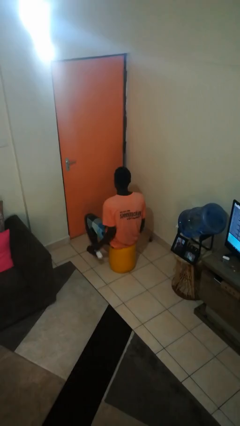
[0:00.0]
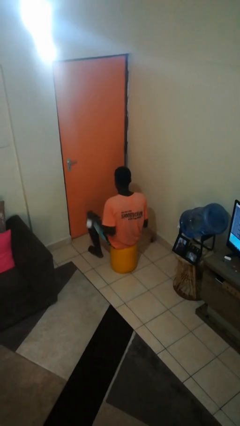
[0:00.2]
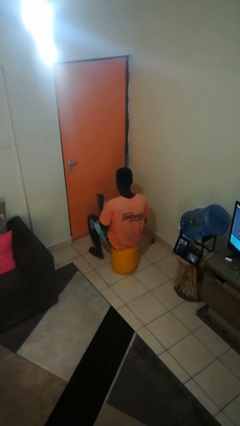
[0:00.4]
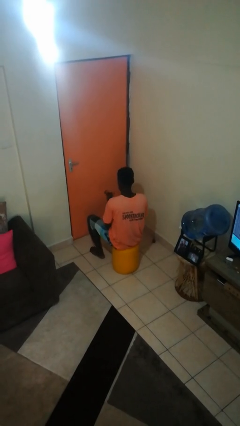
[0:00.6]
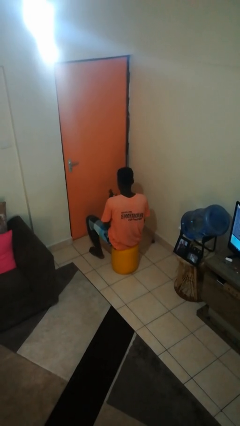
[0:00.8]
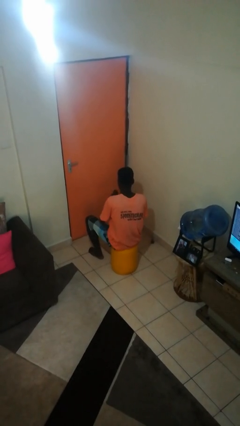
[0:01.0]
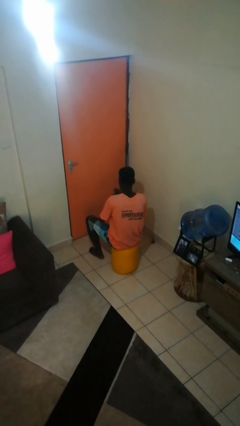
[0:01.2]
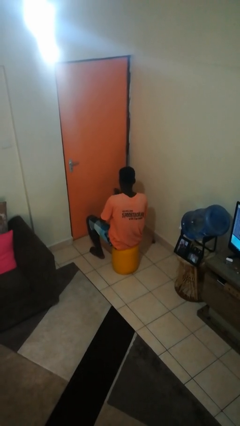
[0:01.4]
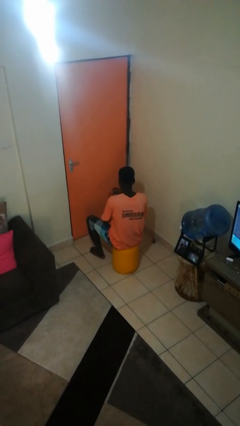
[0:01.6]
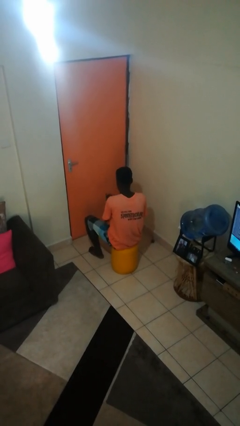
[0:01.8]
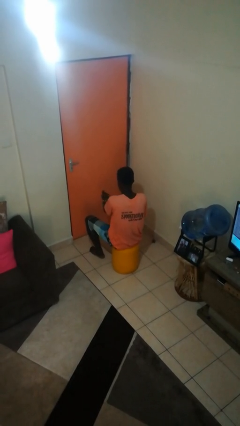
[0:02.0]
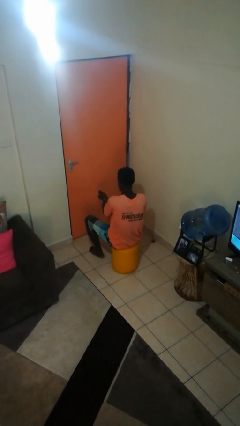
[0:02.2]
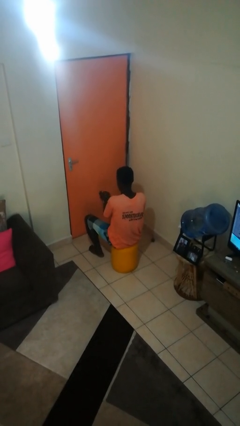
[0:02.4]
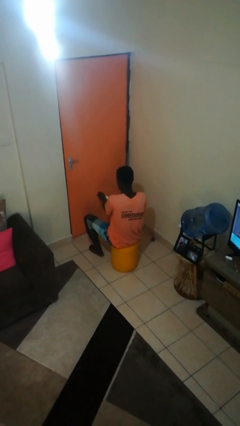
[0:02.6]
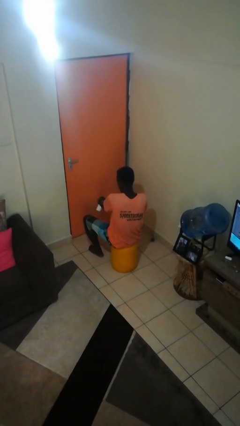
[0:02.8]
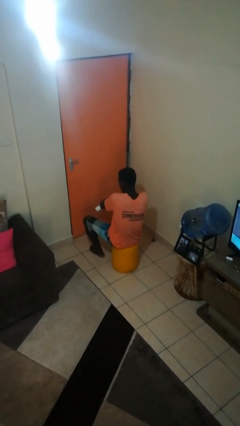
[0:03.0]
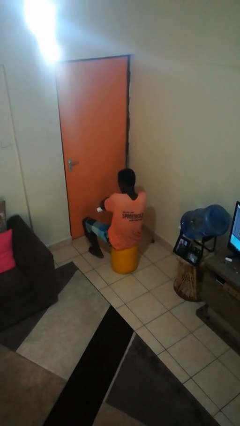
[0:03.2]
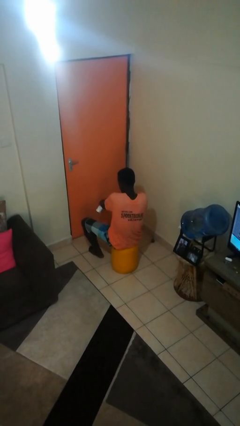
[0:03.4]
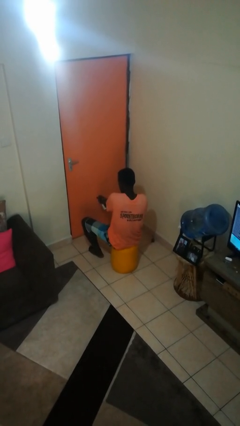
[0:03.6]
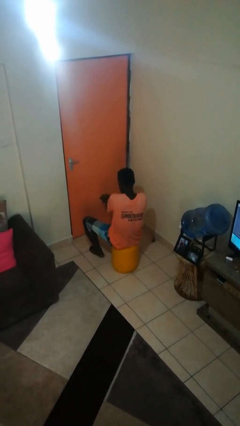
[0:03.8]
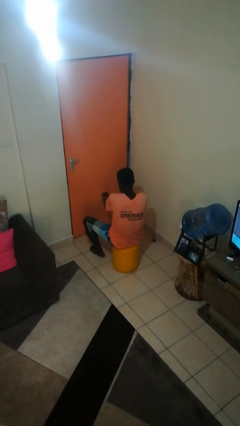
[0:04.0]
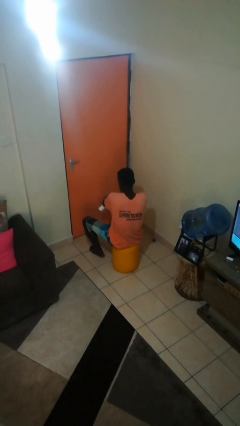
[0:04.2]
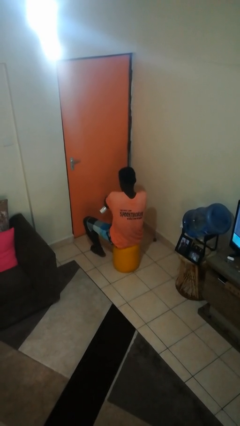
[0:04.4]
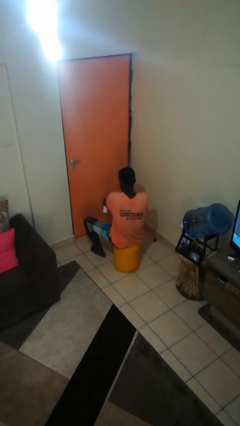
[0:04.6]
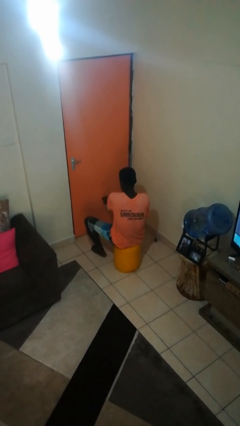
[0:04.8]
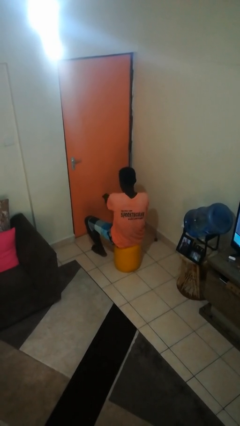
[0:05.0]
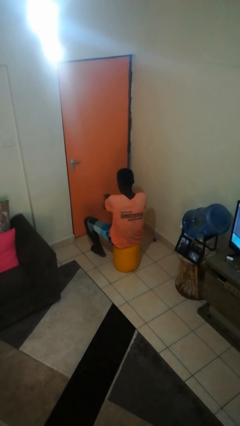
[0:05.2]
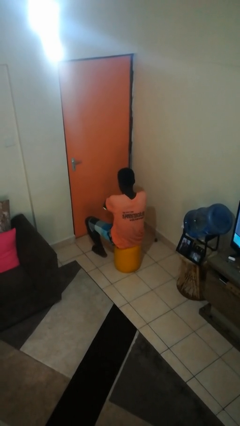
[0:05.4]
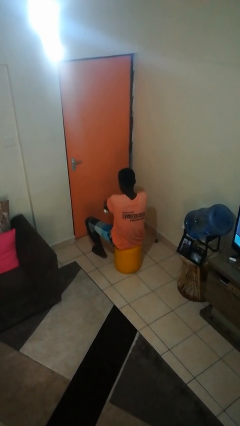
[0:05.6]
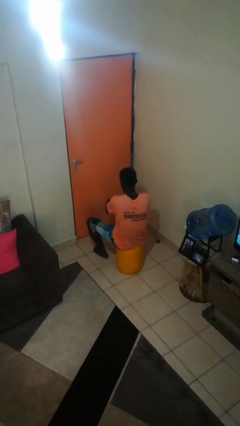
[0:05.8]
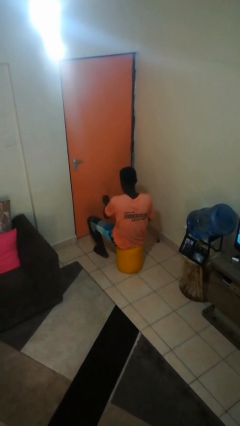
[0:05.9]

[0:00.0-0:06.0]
person applies sunscreen

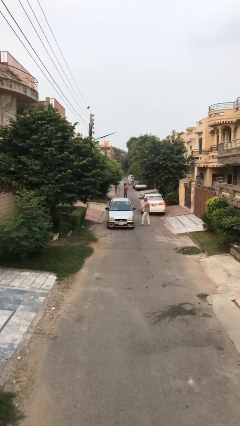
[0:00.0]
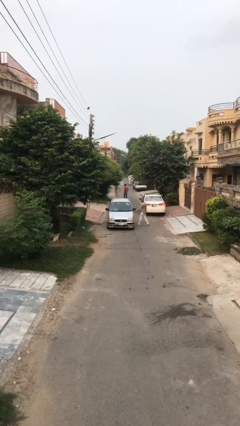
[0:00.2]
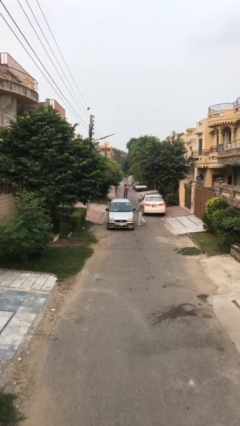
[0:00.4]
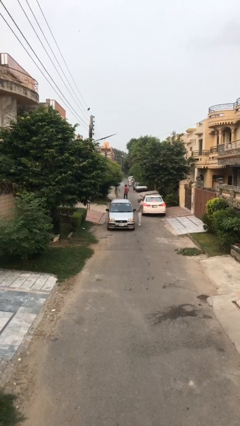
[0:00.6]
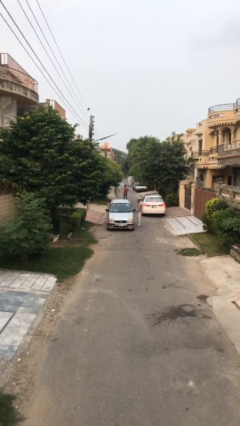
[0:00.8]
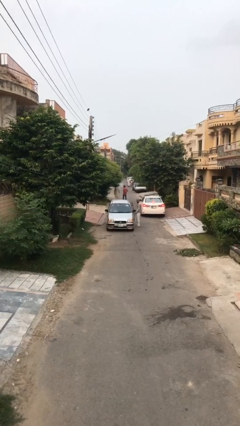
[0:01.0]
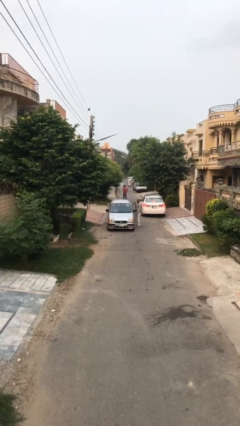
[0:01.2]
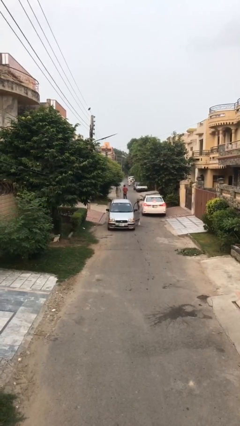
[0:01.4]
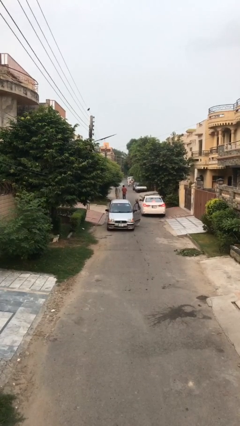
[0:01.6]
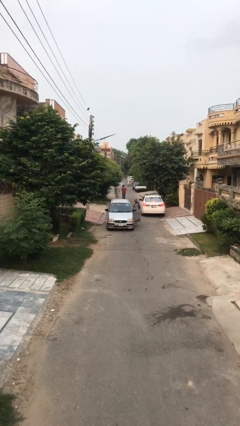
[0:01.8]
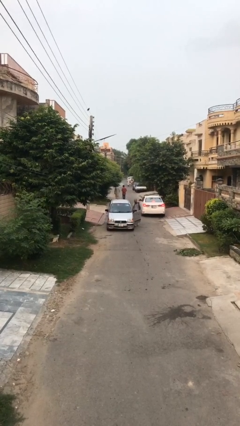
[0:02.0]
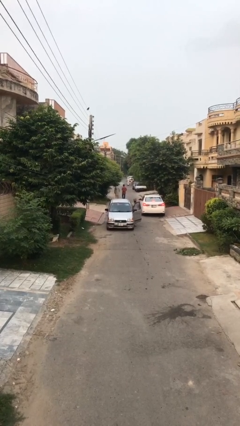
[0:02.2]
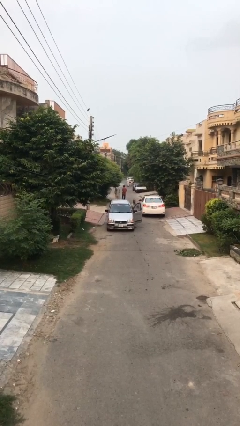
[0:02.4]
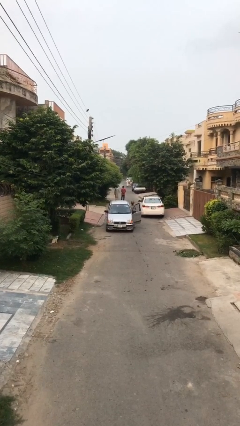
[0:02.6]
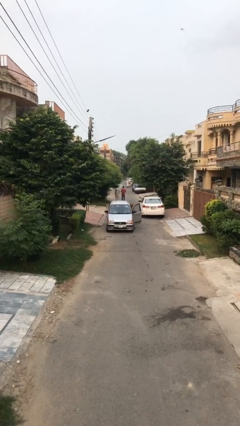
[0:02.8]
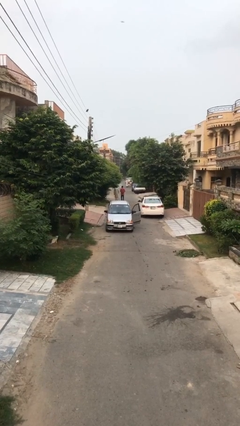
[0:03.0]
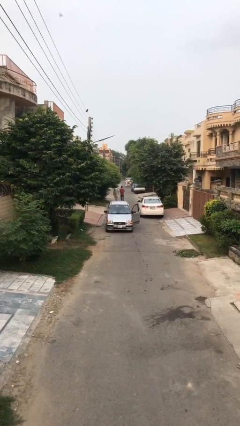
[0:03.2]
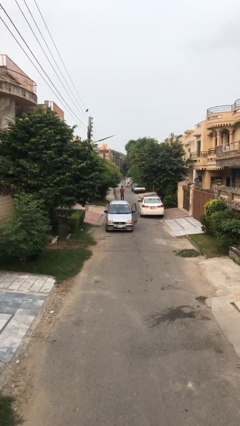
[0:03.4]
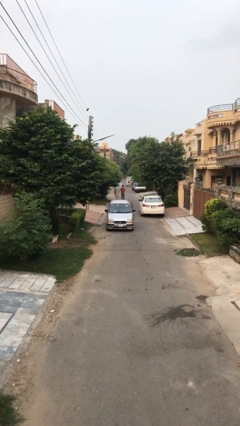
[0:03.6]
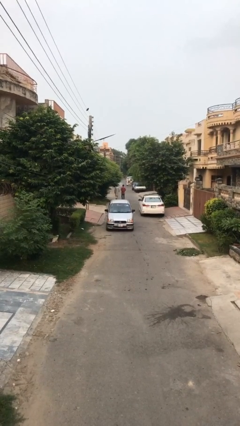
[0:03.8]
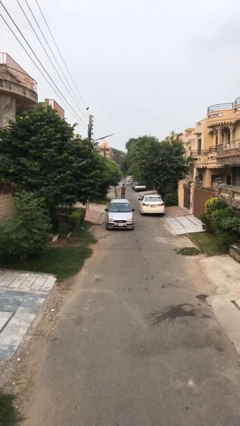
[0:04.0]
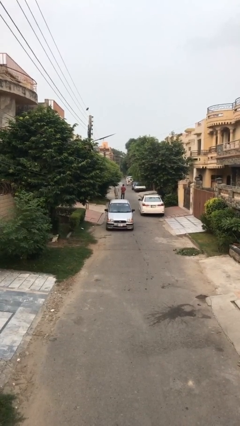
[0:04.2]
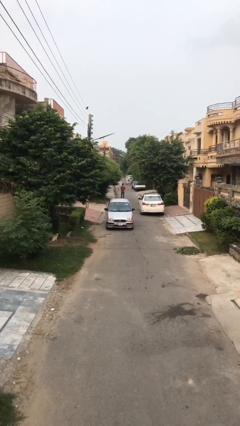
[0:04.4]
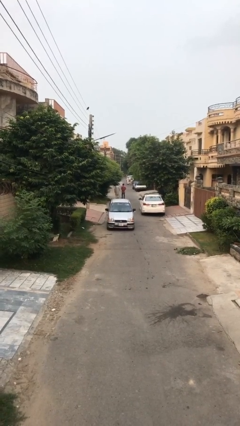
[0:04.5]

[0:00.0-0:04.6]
car picks up person

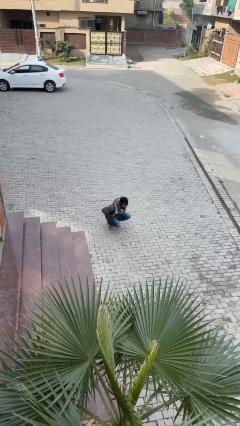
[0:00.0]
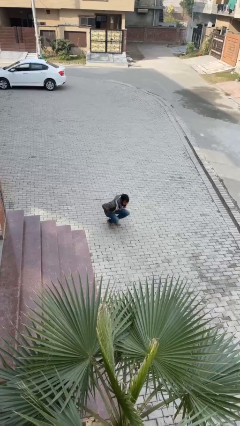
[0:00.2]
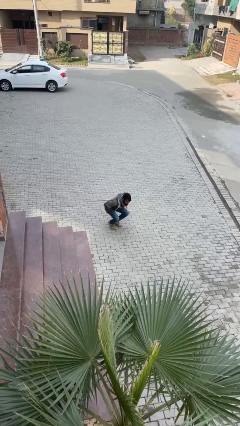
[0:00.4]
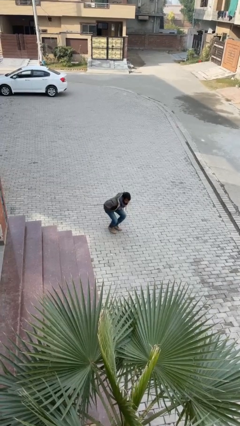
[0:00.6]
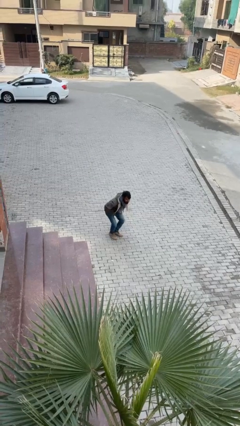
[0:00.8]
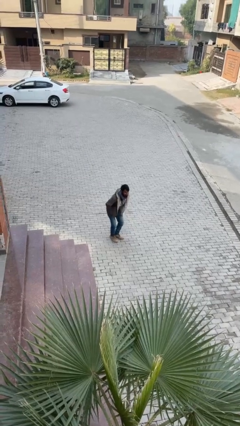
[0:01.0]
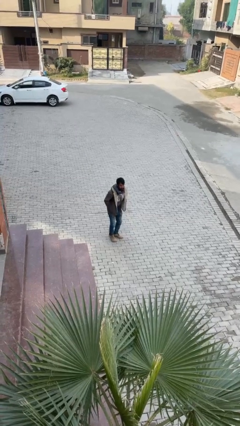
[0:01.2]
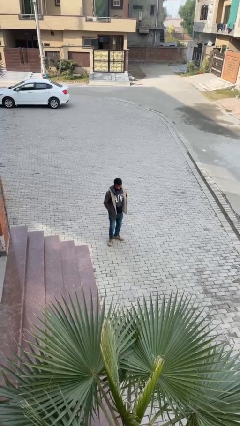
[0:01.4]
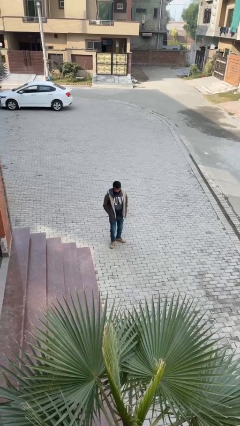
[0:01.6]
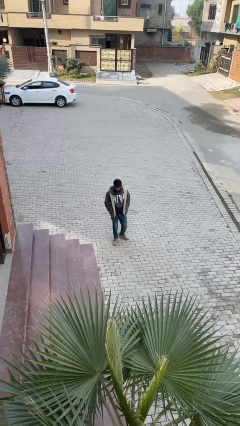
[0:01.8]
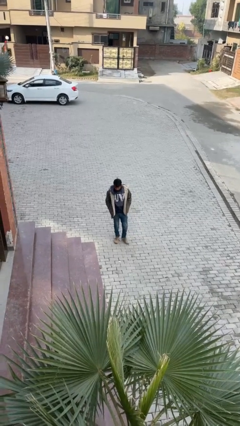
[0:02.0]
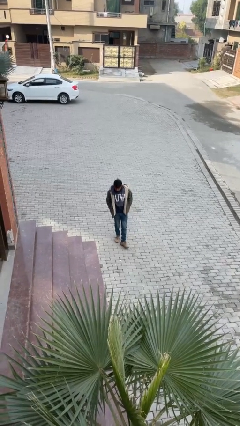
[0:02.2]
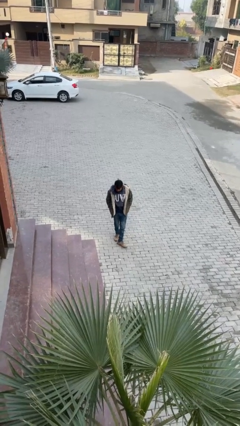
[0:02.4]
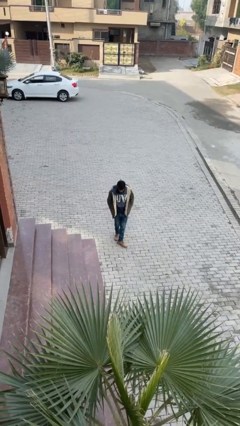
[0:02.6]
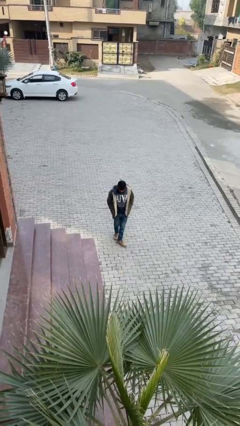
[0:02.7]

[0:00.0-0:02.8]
person stands up

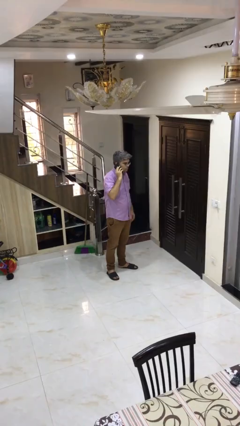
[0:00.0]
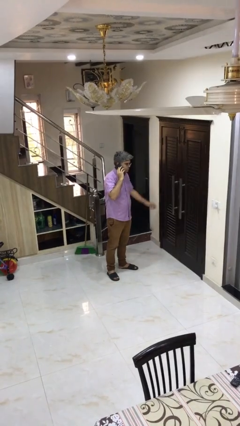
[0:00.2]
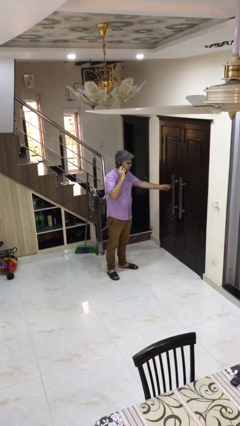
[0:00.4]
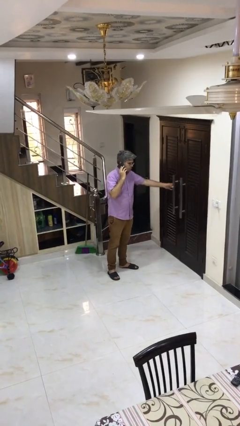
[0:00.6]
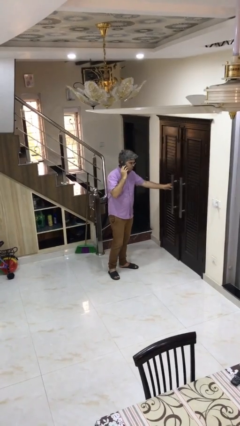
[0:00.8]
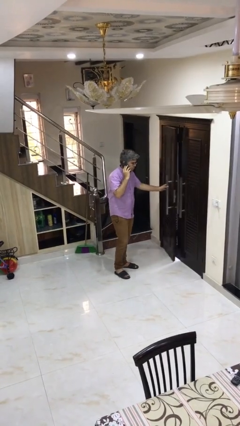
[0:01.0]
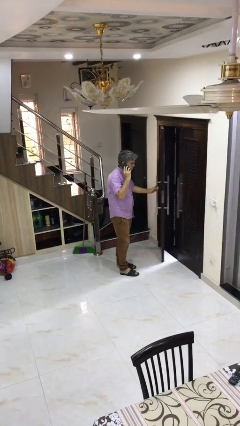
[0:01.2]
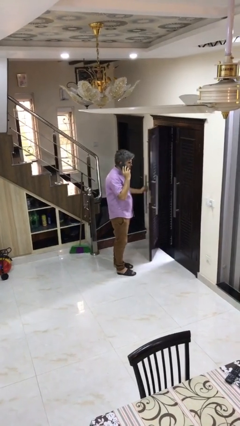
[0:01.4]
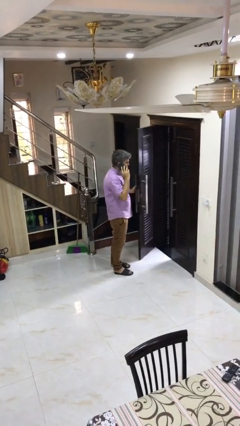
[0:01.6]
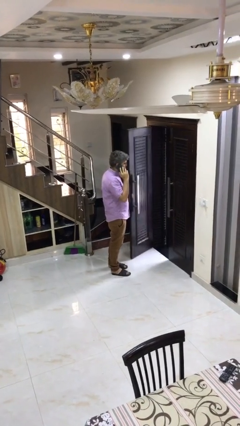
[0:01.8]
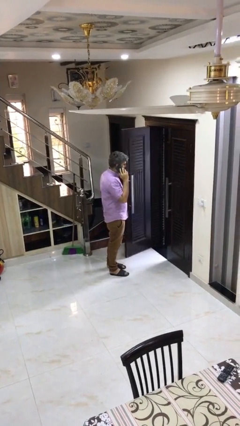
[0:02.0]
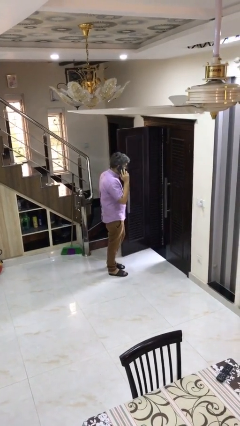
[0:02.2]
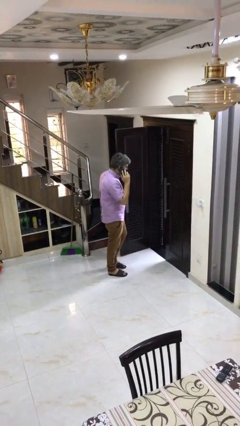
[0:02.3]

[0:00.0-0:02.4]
person opens facility door

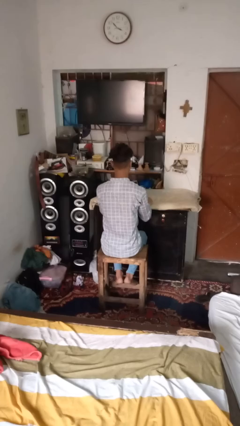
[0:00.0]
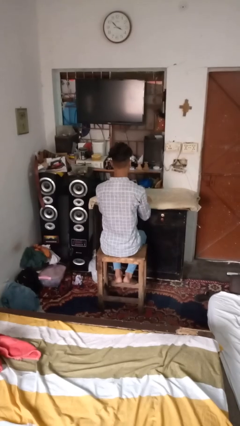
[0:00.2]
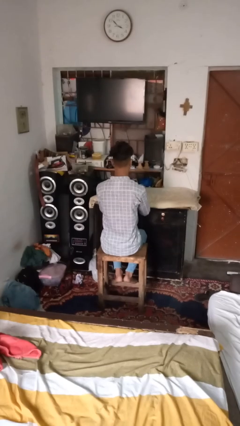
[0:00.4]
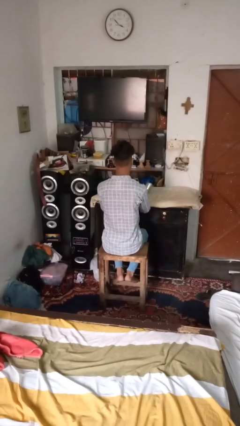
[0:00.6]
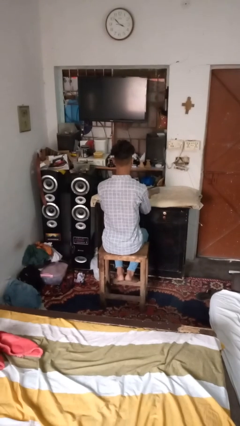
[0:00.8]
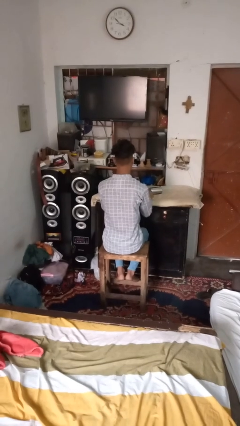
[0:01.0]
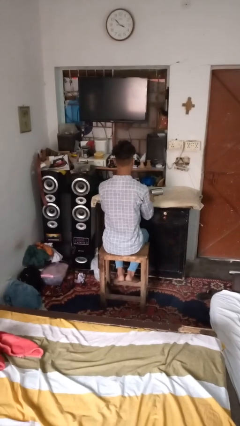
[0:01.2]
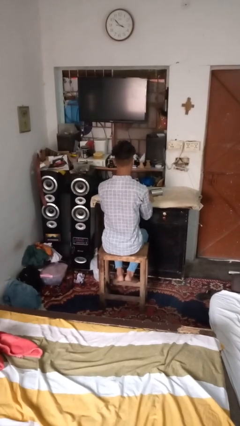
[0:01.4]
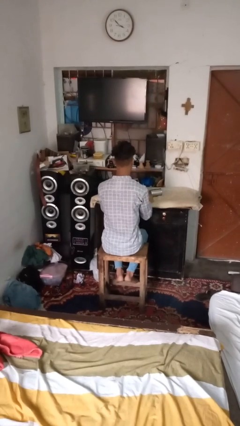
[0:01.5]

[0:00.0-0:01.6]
person knocks over glass

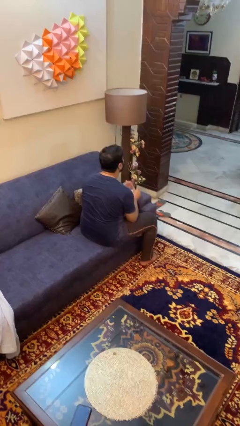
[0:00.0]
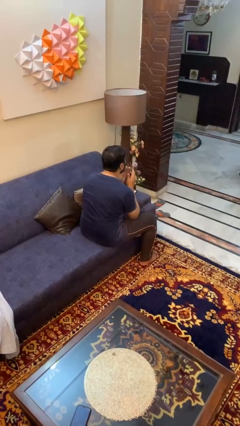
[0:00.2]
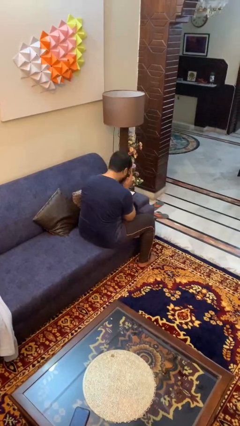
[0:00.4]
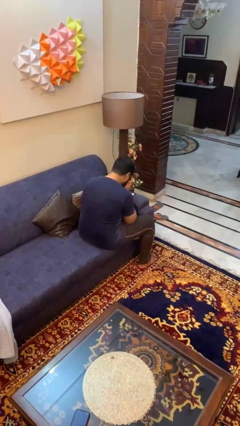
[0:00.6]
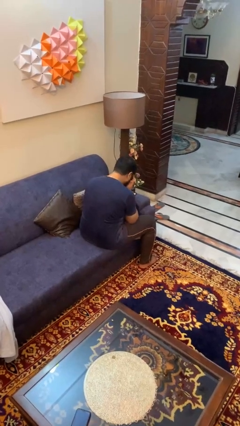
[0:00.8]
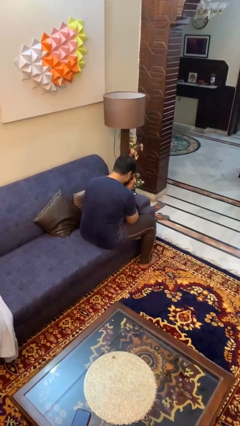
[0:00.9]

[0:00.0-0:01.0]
person sneezes into hand
